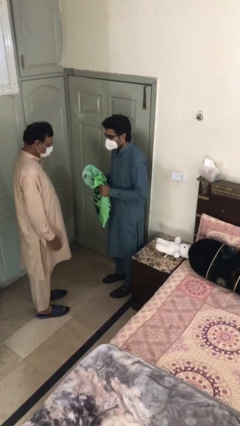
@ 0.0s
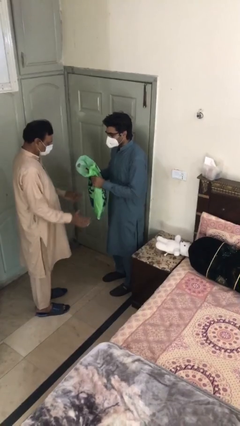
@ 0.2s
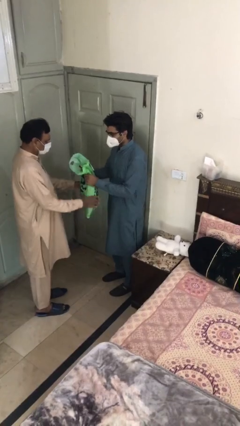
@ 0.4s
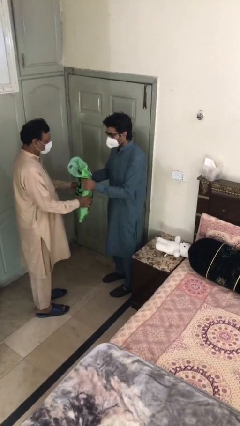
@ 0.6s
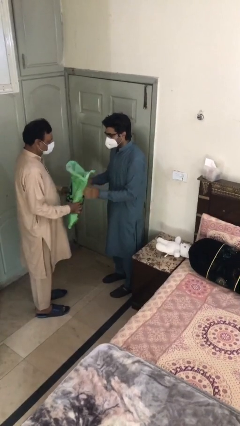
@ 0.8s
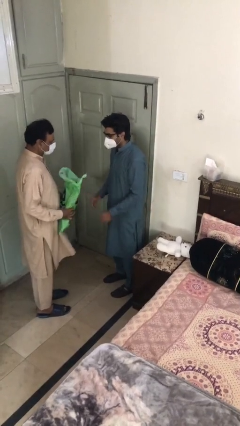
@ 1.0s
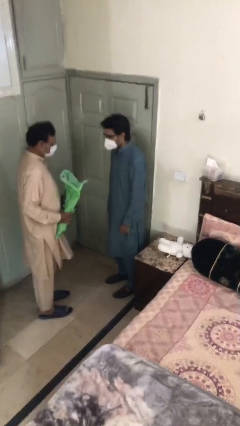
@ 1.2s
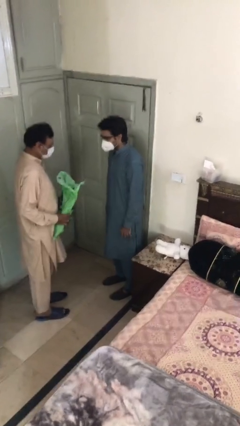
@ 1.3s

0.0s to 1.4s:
person transfers object to person

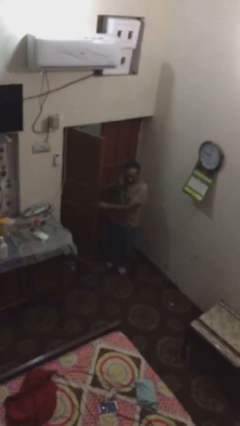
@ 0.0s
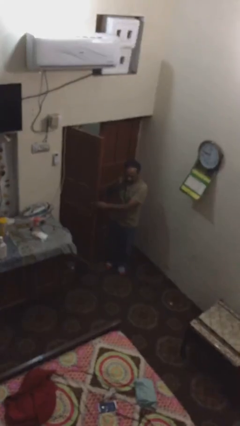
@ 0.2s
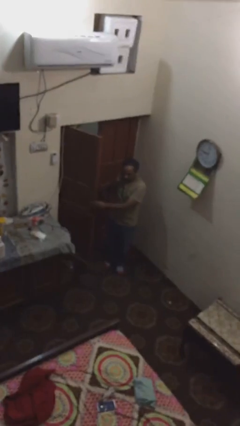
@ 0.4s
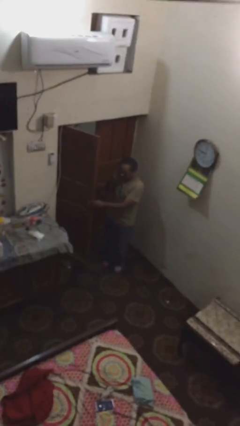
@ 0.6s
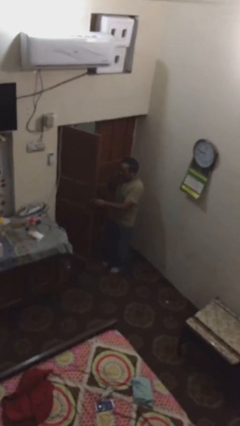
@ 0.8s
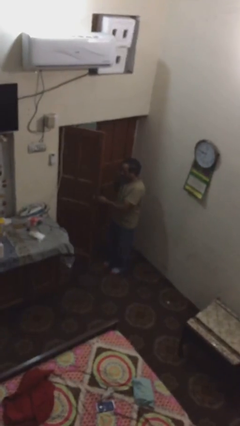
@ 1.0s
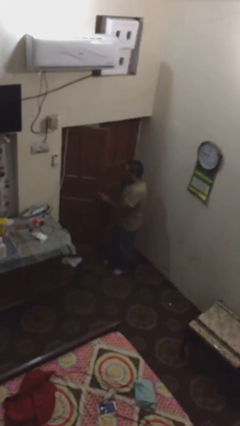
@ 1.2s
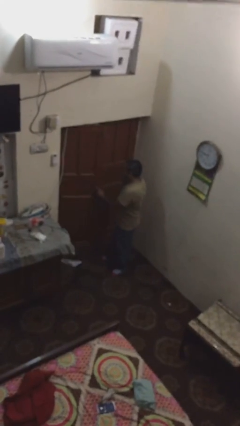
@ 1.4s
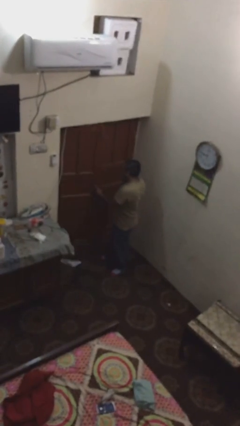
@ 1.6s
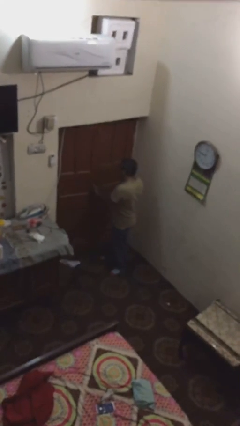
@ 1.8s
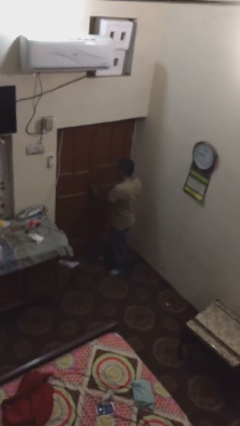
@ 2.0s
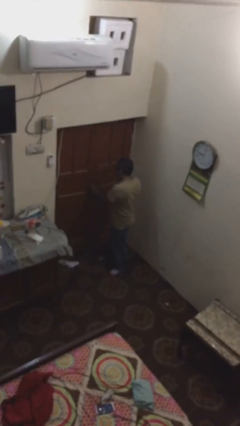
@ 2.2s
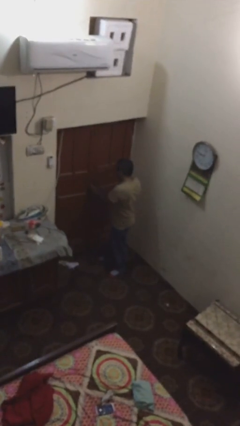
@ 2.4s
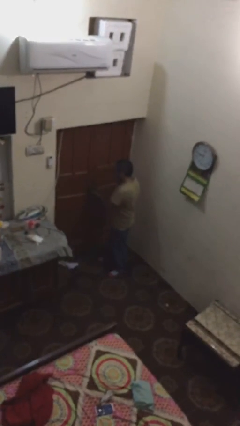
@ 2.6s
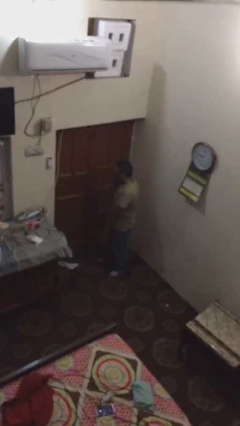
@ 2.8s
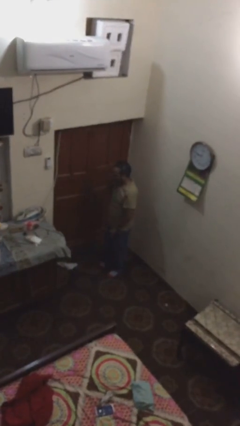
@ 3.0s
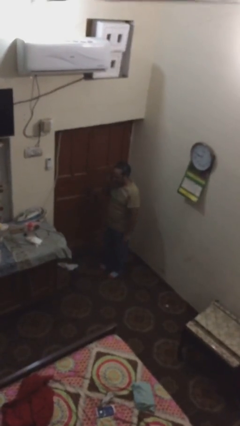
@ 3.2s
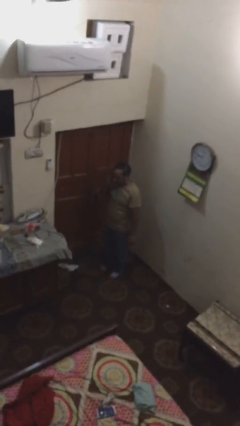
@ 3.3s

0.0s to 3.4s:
person closes facility door

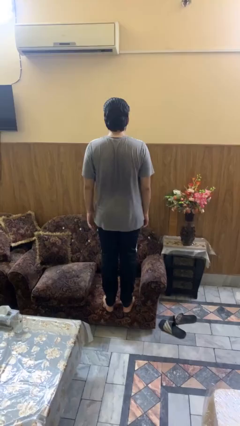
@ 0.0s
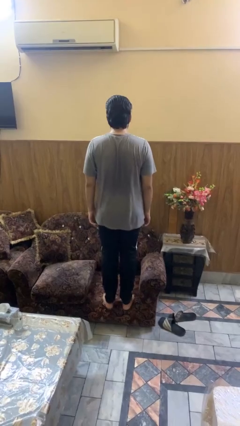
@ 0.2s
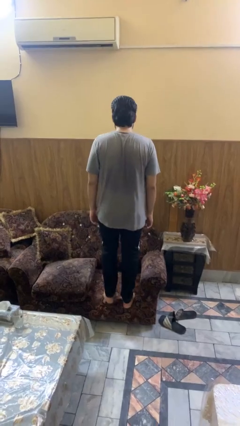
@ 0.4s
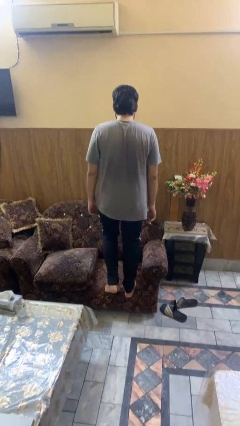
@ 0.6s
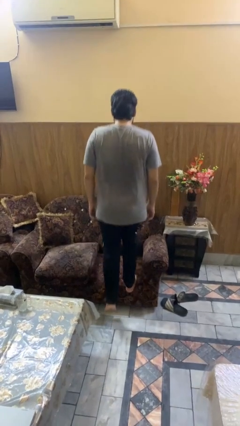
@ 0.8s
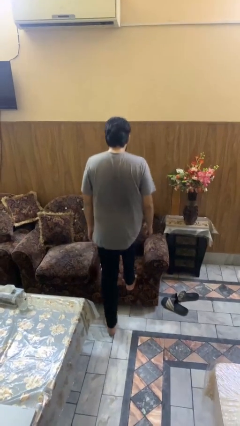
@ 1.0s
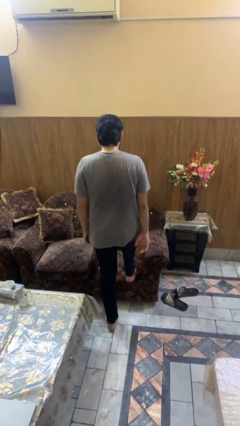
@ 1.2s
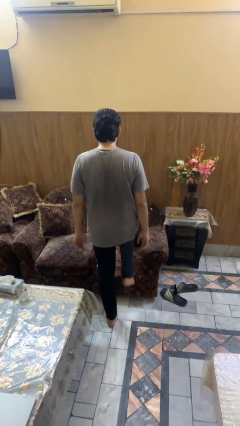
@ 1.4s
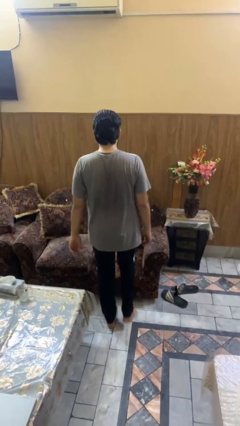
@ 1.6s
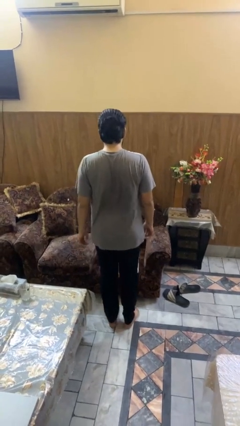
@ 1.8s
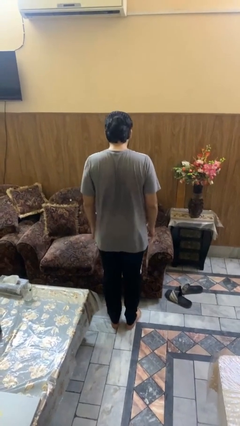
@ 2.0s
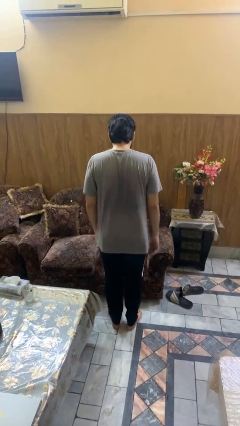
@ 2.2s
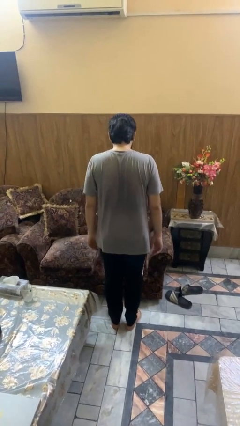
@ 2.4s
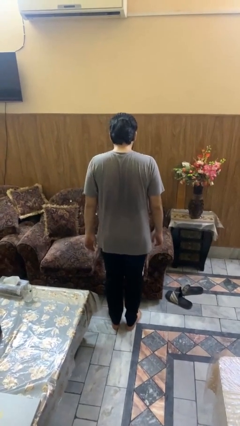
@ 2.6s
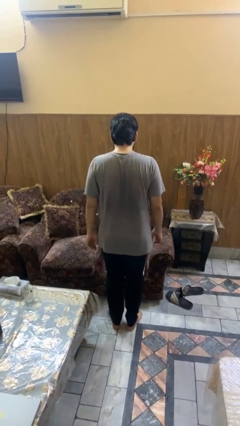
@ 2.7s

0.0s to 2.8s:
person climbs off couch

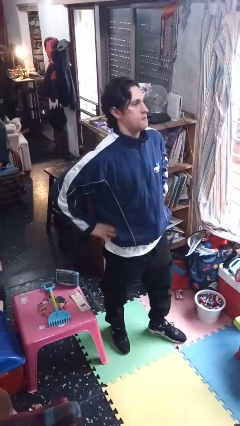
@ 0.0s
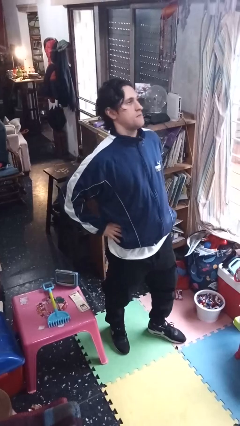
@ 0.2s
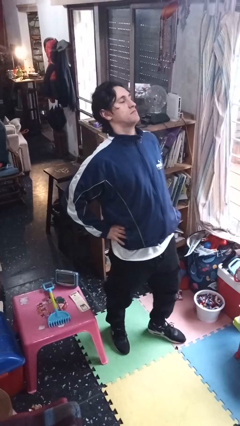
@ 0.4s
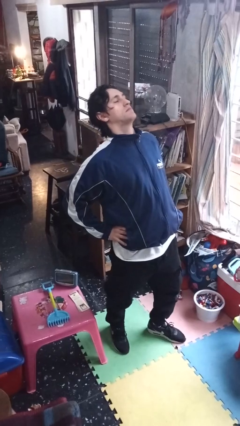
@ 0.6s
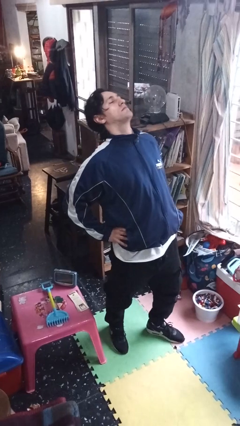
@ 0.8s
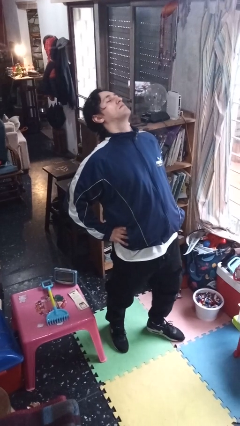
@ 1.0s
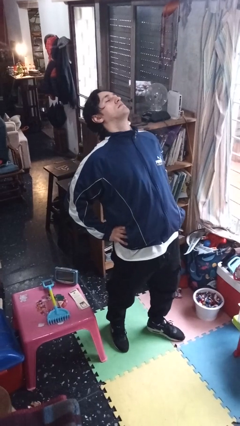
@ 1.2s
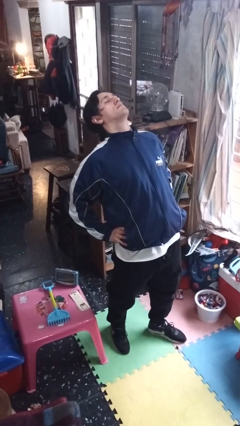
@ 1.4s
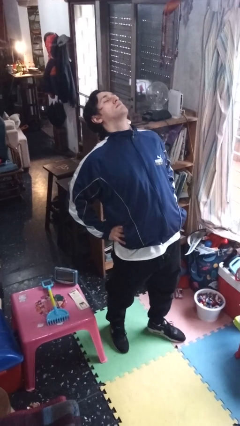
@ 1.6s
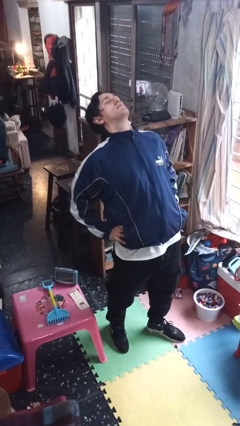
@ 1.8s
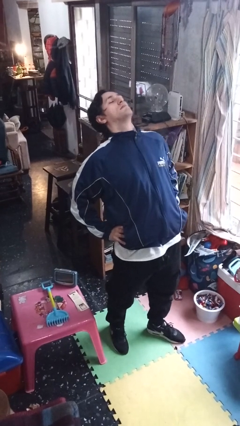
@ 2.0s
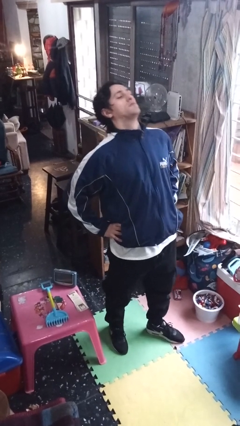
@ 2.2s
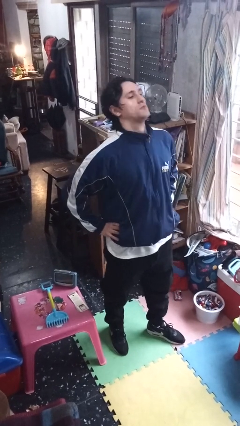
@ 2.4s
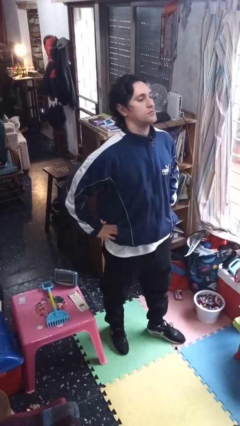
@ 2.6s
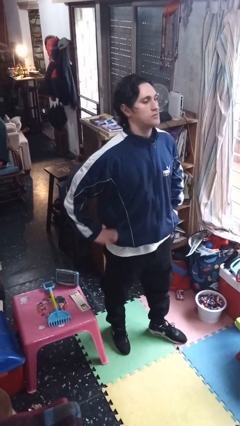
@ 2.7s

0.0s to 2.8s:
person stretches back

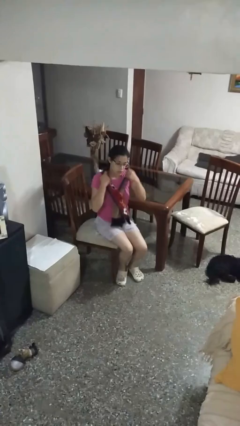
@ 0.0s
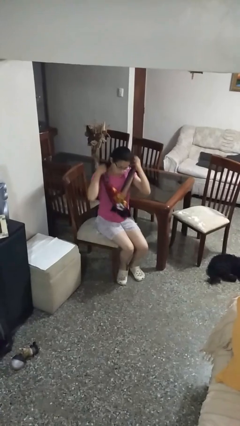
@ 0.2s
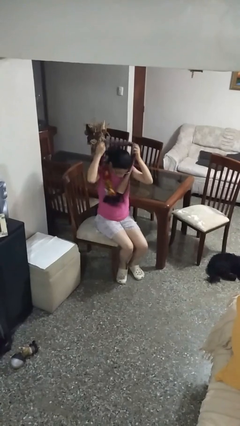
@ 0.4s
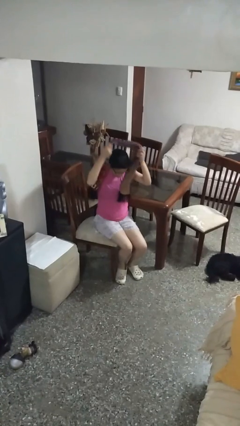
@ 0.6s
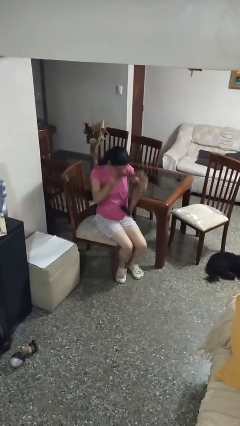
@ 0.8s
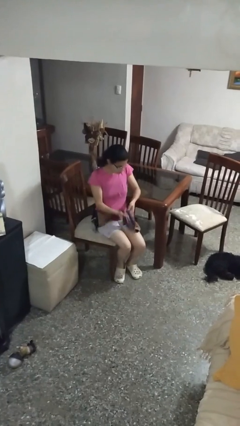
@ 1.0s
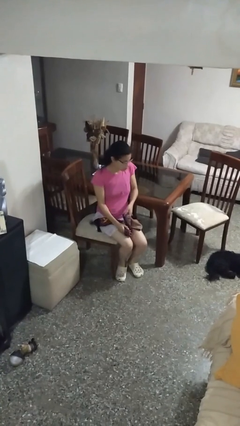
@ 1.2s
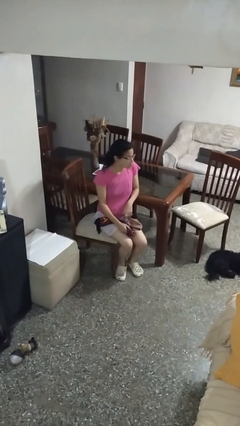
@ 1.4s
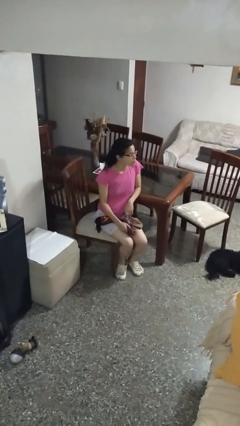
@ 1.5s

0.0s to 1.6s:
person takes off scarf

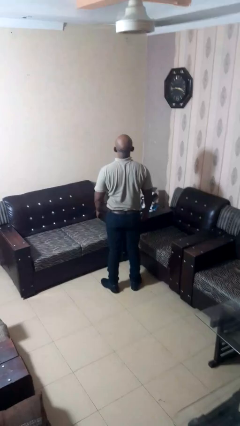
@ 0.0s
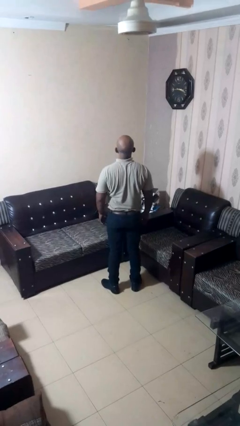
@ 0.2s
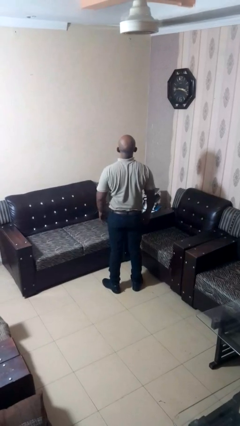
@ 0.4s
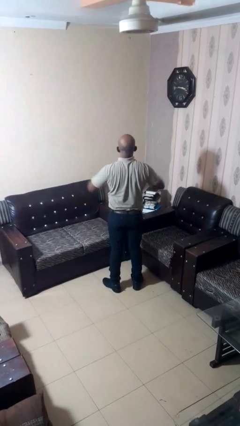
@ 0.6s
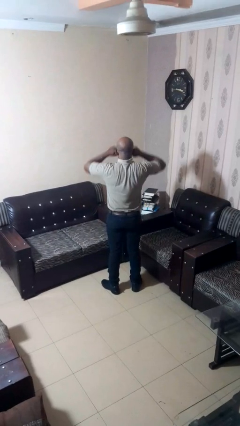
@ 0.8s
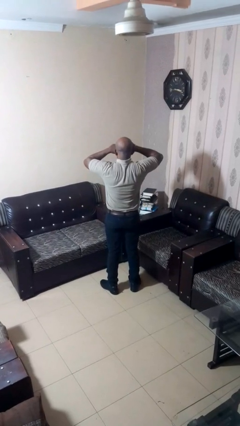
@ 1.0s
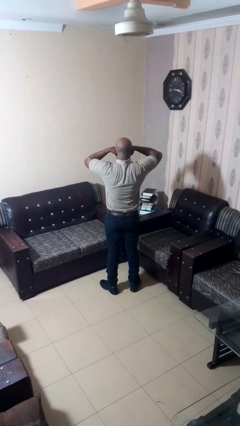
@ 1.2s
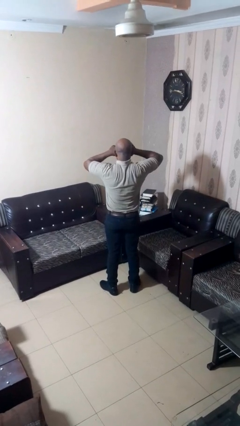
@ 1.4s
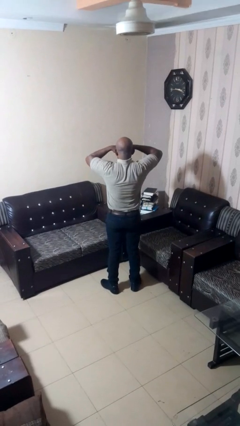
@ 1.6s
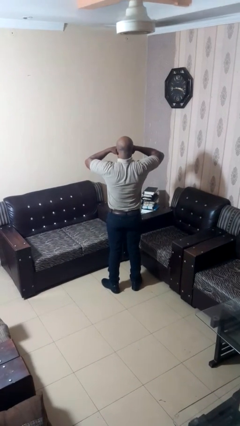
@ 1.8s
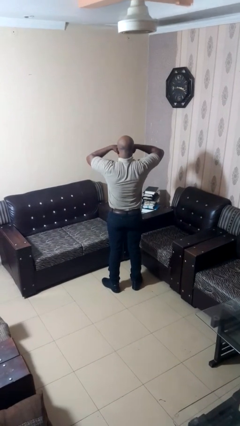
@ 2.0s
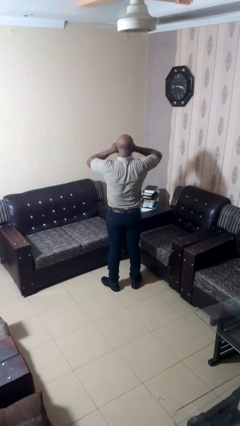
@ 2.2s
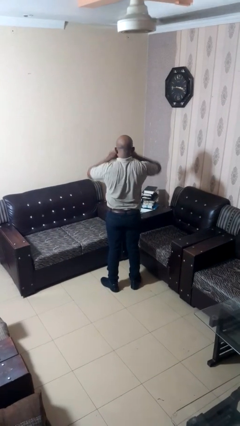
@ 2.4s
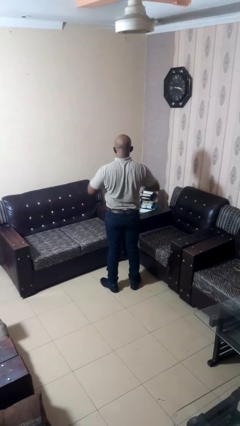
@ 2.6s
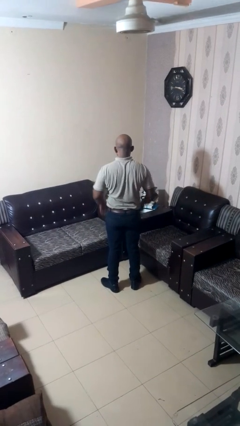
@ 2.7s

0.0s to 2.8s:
person rubs eyes

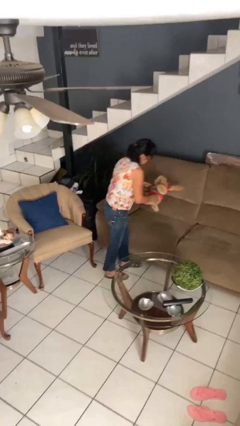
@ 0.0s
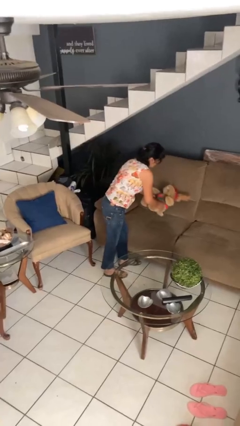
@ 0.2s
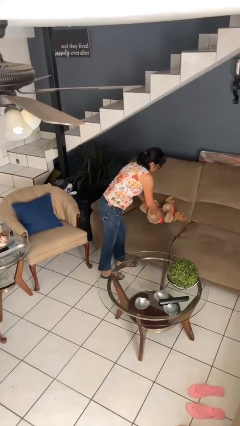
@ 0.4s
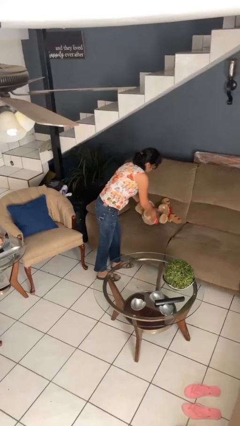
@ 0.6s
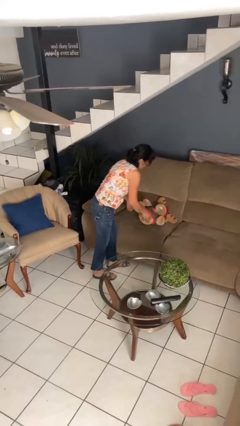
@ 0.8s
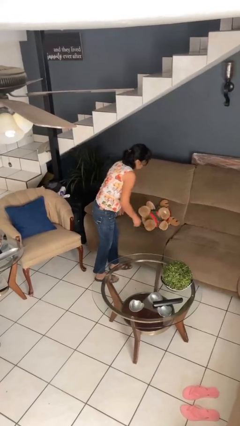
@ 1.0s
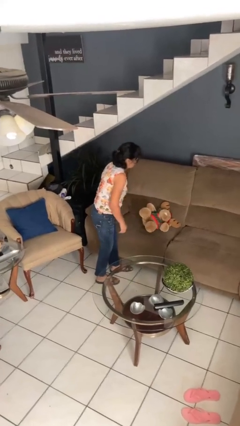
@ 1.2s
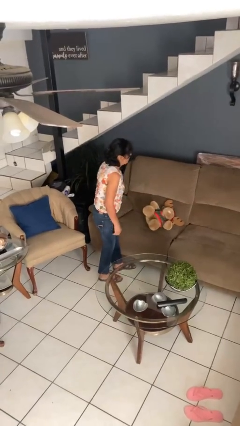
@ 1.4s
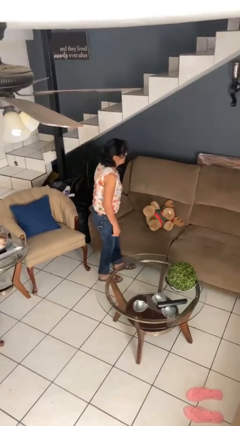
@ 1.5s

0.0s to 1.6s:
person puts down object on couch

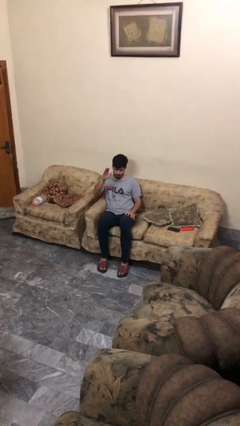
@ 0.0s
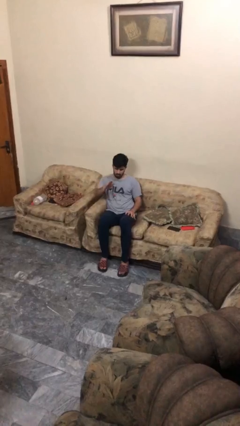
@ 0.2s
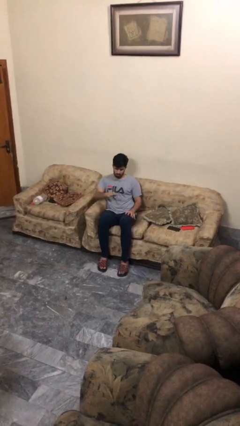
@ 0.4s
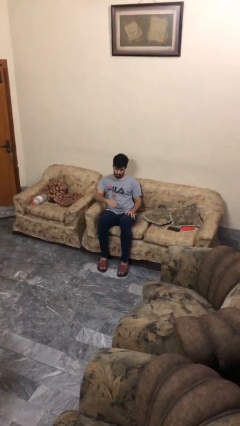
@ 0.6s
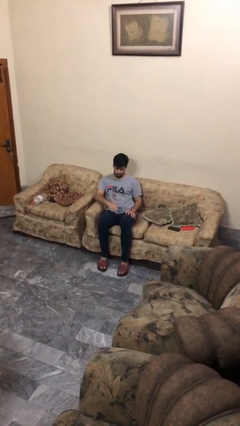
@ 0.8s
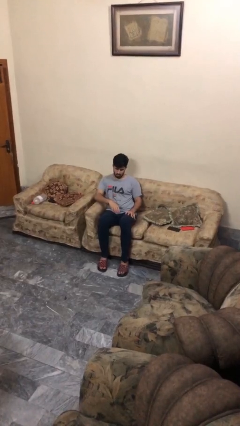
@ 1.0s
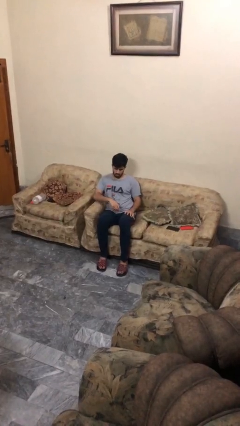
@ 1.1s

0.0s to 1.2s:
person gestures swipe down
